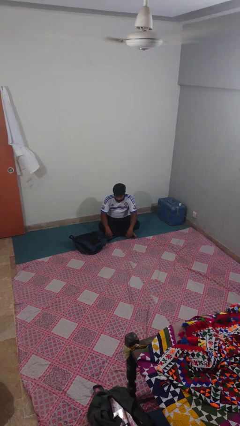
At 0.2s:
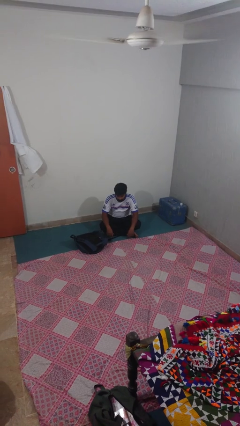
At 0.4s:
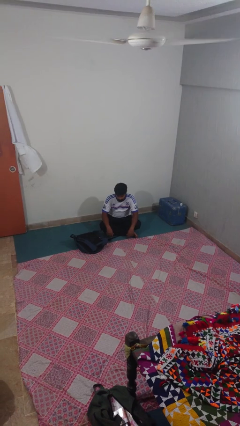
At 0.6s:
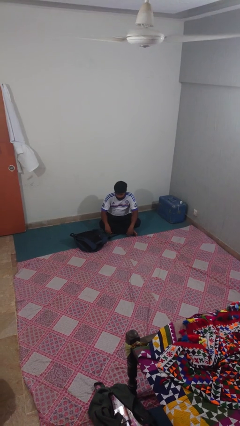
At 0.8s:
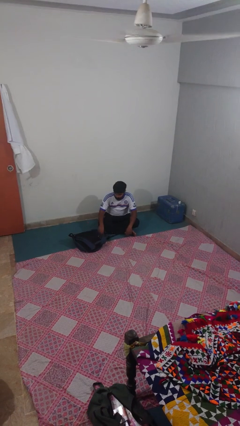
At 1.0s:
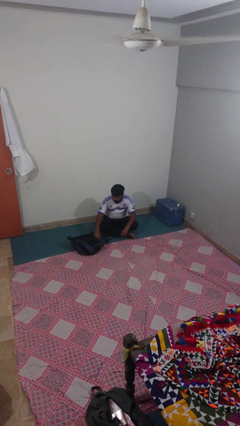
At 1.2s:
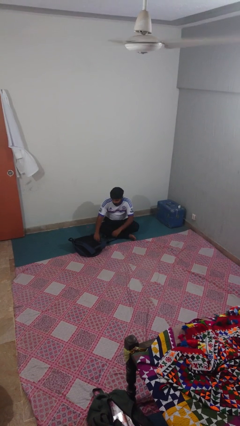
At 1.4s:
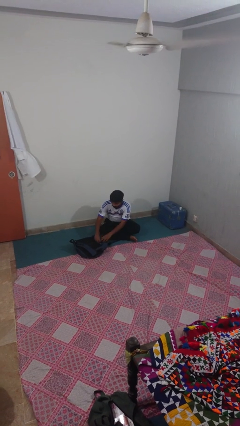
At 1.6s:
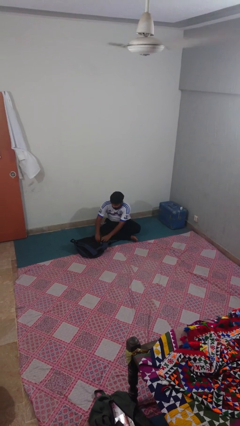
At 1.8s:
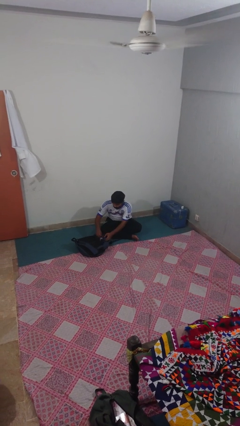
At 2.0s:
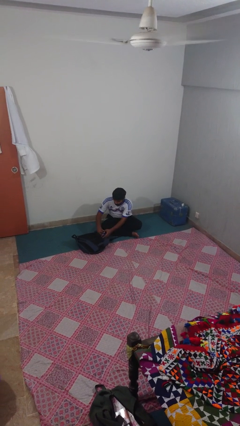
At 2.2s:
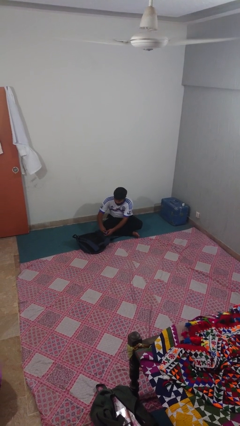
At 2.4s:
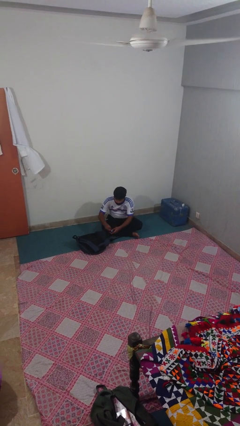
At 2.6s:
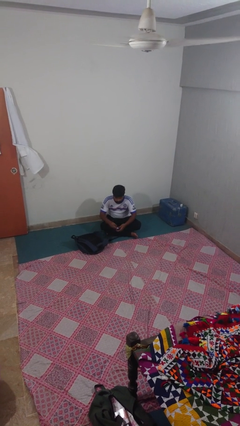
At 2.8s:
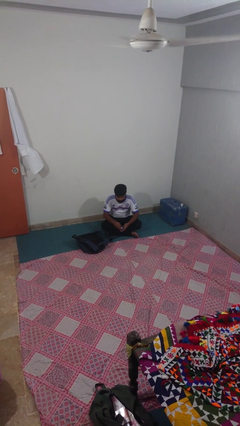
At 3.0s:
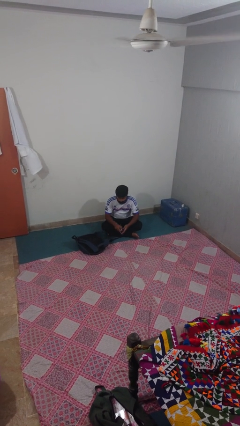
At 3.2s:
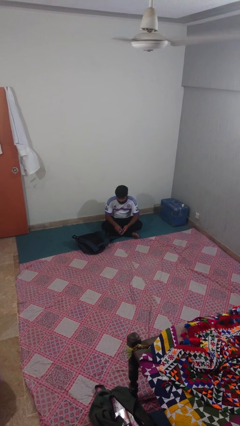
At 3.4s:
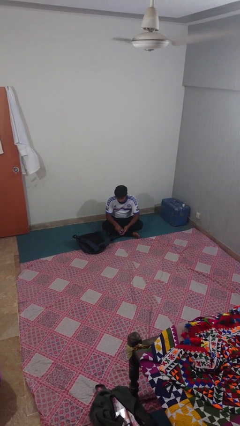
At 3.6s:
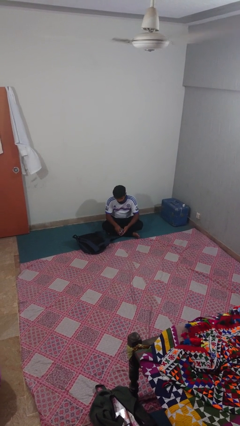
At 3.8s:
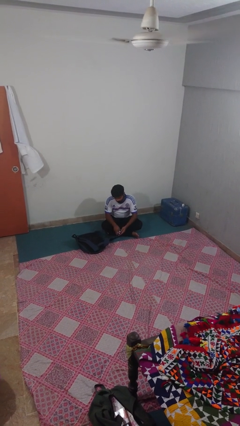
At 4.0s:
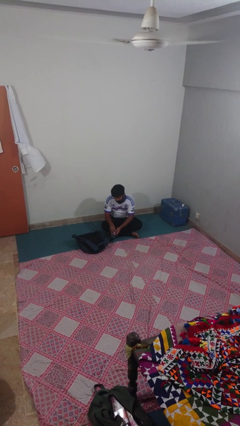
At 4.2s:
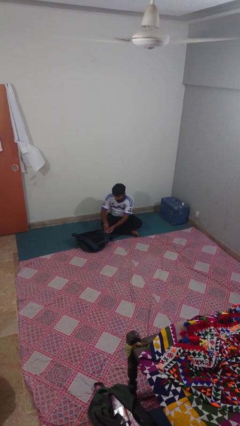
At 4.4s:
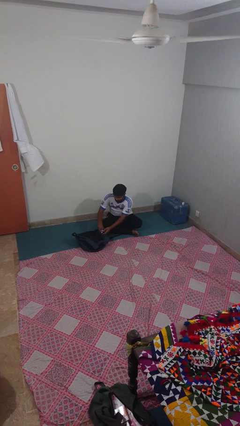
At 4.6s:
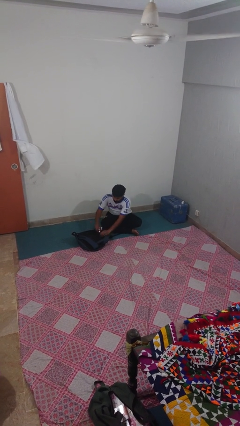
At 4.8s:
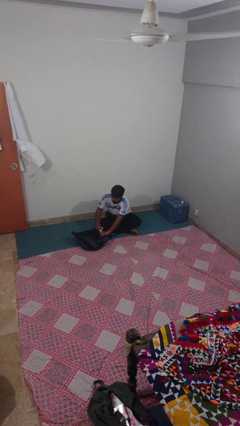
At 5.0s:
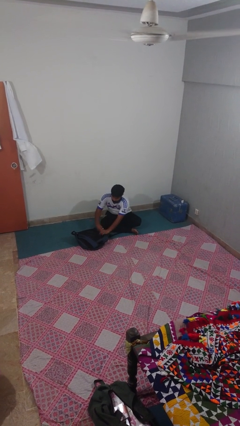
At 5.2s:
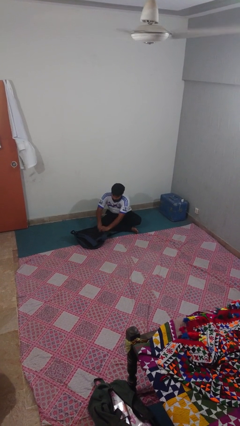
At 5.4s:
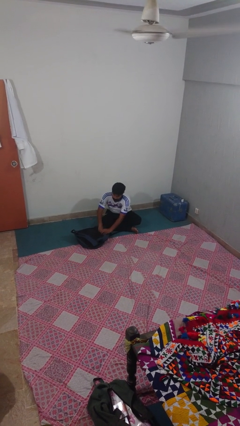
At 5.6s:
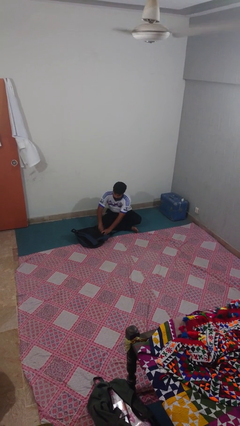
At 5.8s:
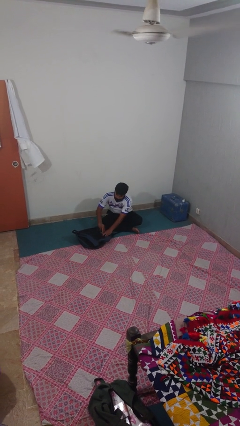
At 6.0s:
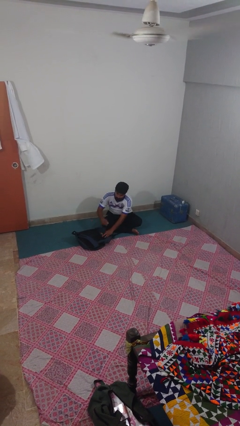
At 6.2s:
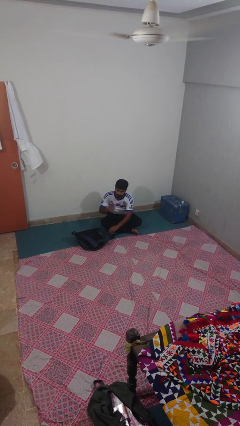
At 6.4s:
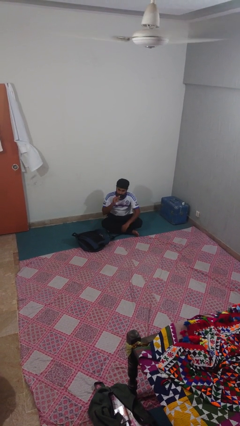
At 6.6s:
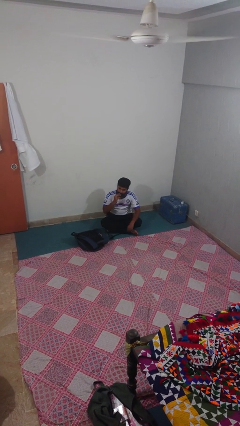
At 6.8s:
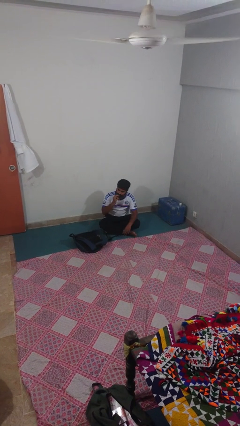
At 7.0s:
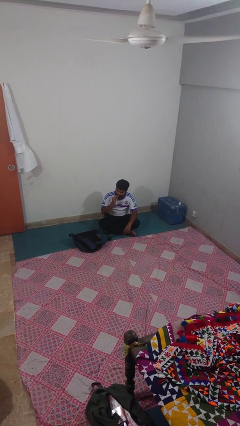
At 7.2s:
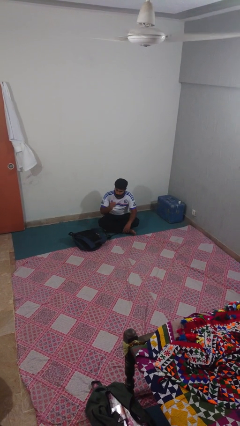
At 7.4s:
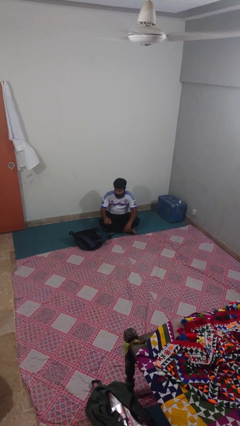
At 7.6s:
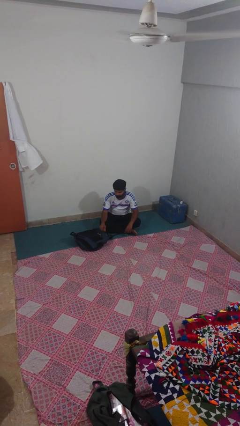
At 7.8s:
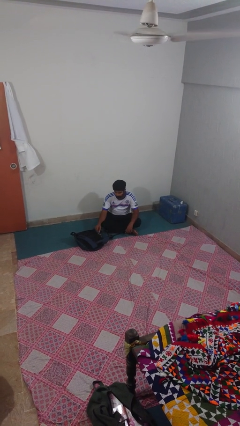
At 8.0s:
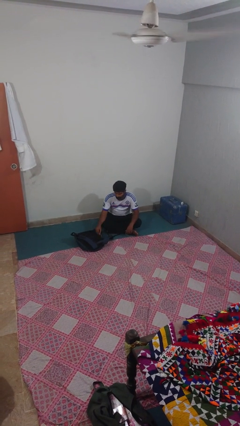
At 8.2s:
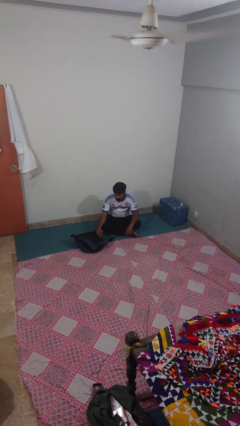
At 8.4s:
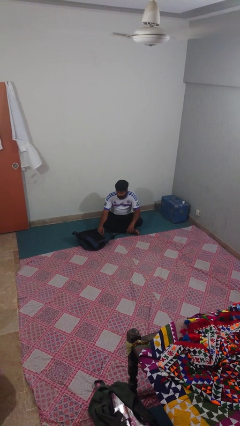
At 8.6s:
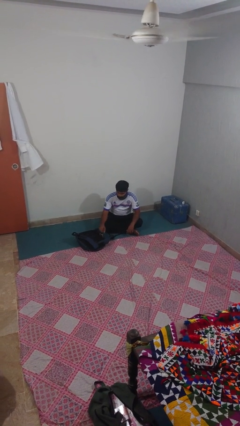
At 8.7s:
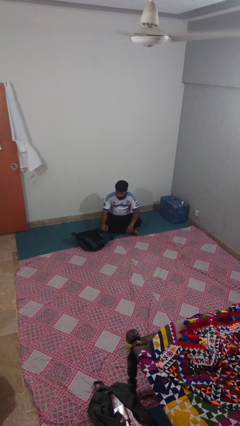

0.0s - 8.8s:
person eats snack from bag

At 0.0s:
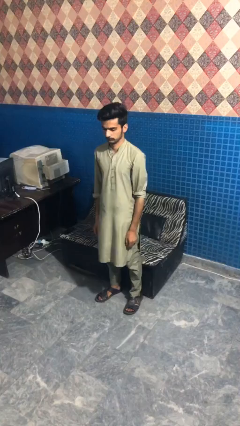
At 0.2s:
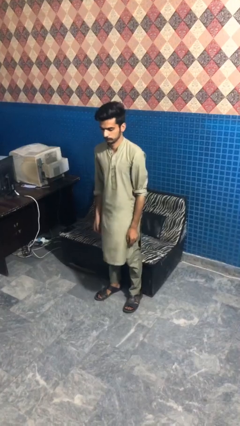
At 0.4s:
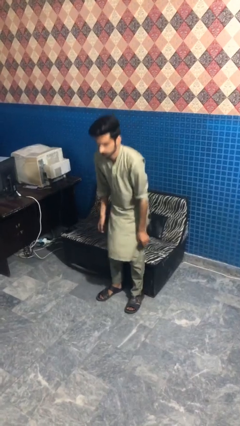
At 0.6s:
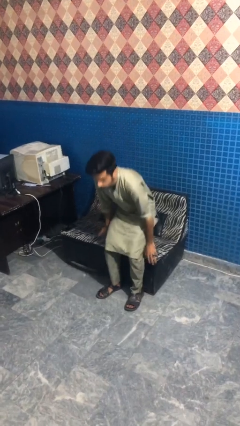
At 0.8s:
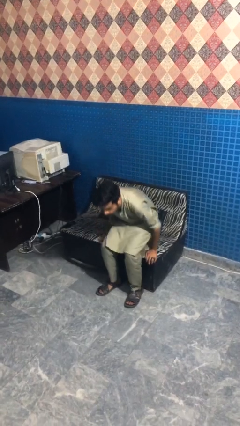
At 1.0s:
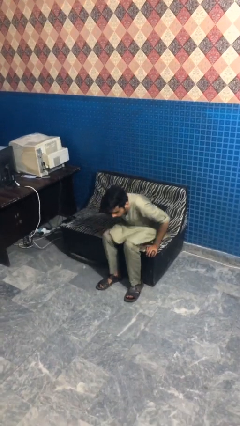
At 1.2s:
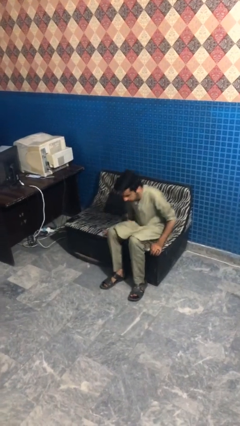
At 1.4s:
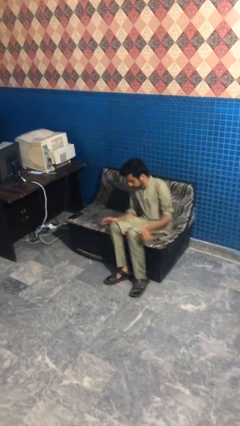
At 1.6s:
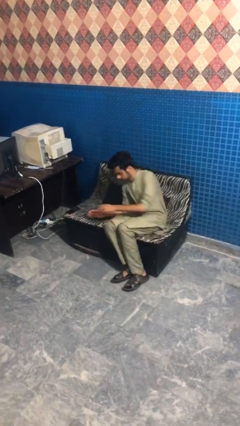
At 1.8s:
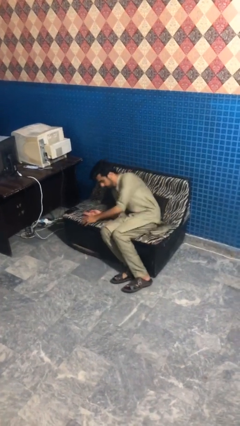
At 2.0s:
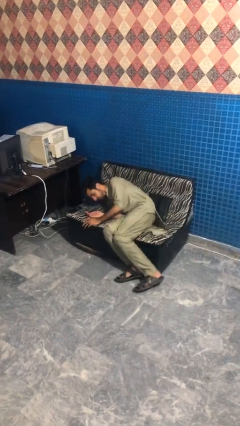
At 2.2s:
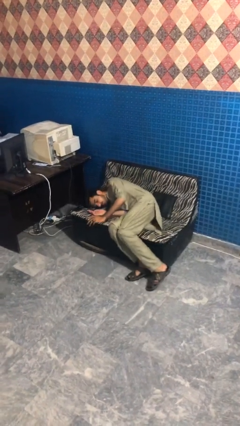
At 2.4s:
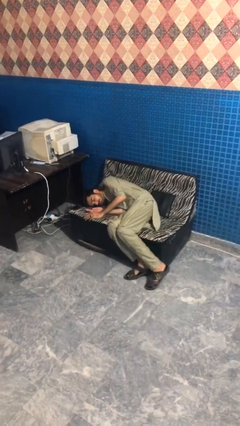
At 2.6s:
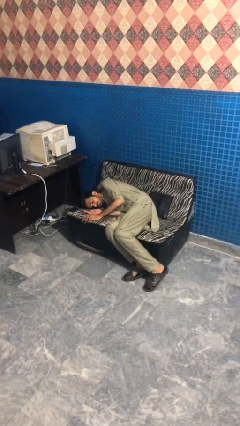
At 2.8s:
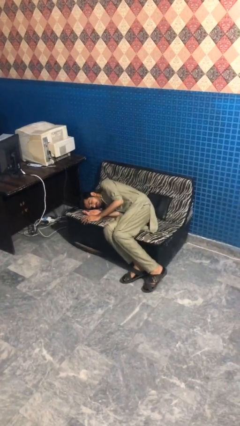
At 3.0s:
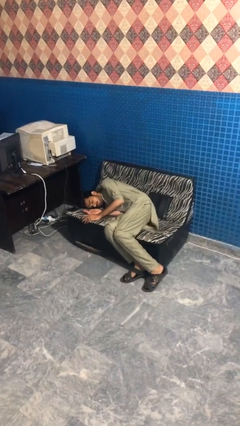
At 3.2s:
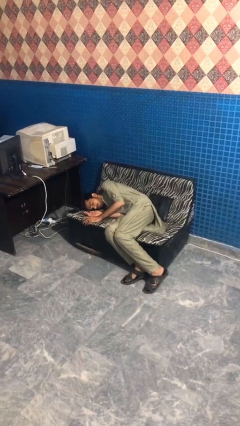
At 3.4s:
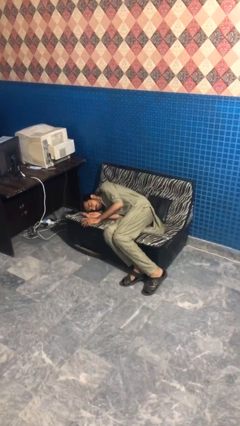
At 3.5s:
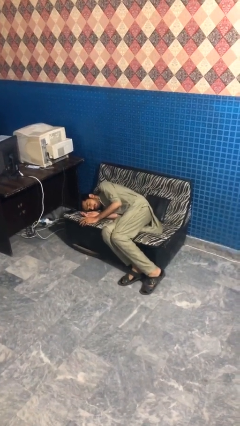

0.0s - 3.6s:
person lies down on couch

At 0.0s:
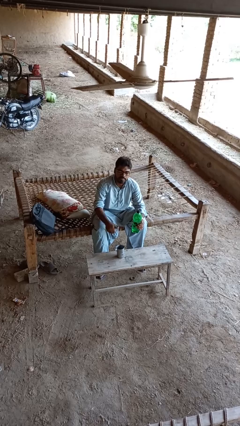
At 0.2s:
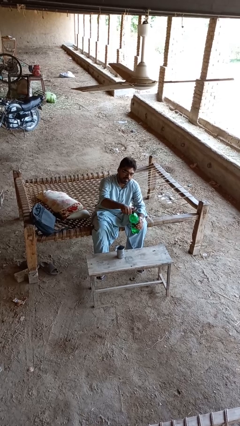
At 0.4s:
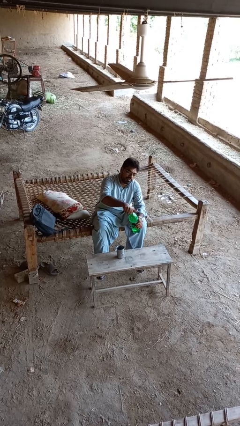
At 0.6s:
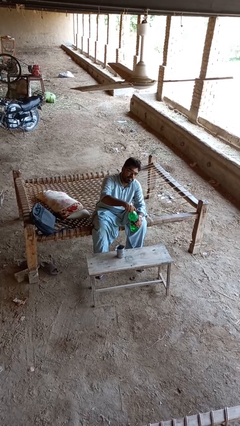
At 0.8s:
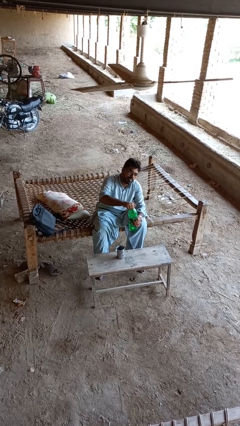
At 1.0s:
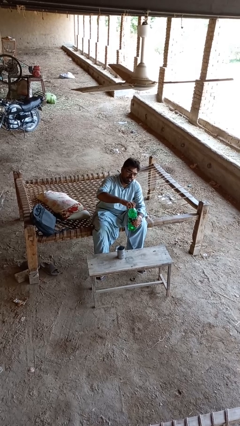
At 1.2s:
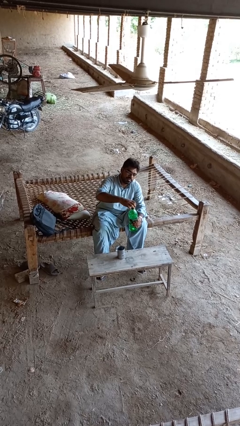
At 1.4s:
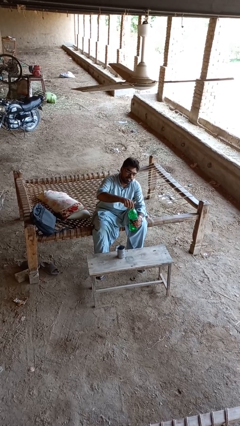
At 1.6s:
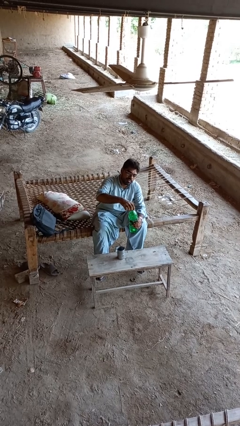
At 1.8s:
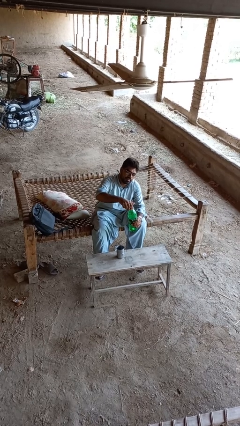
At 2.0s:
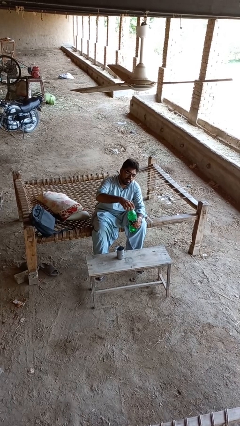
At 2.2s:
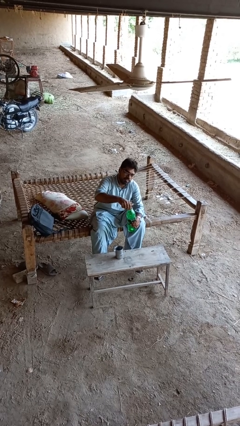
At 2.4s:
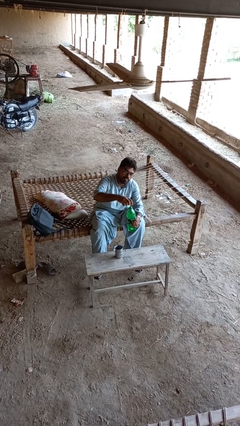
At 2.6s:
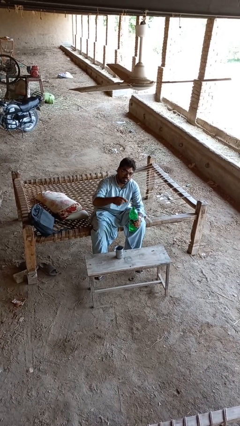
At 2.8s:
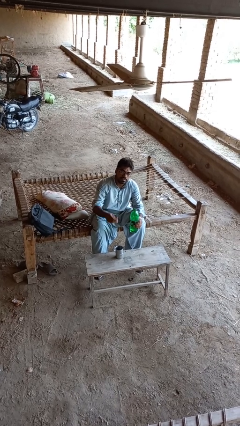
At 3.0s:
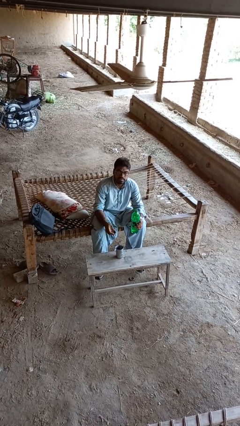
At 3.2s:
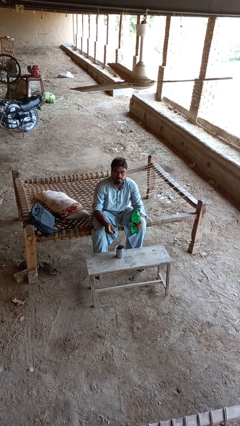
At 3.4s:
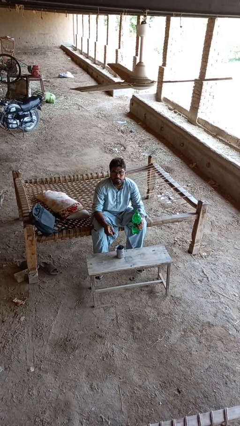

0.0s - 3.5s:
person unscrews lid from bottle

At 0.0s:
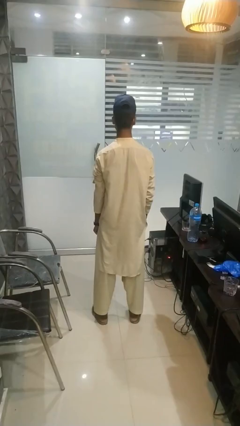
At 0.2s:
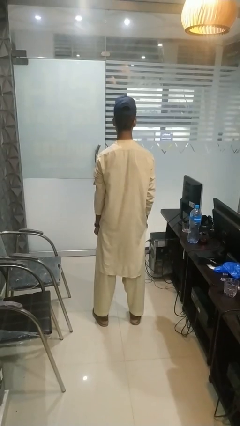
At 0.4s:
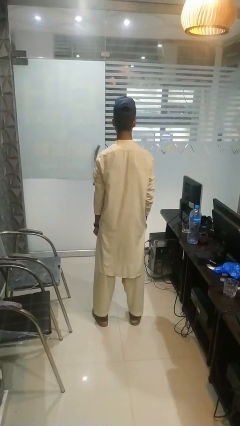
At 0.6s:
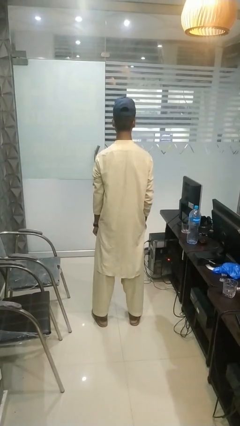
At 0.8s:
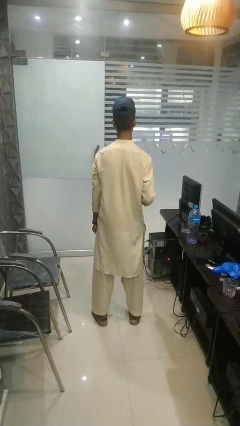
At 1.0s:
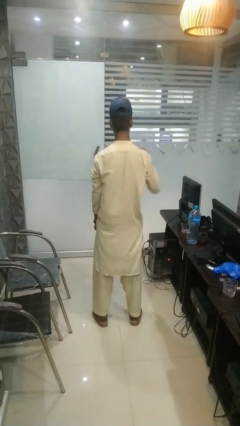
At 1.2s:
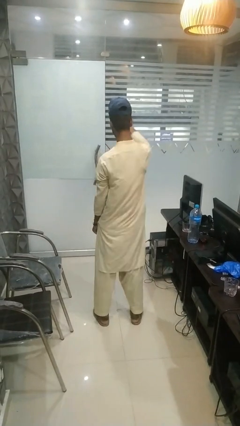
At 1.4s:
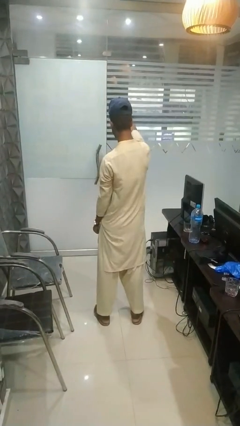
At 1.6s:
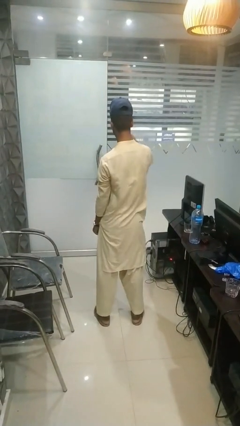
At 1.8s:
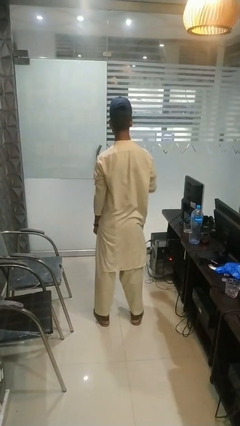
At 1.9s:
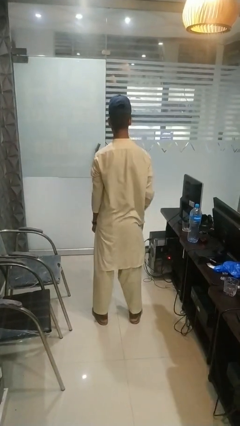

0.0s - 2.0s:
person karate chop

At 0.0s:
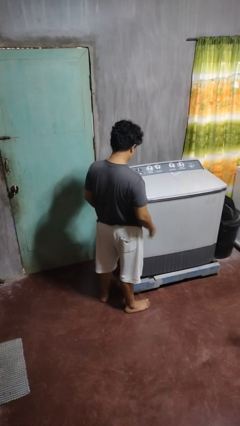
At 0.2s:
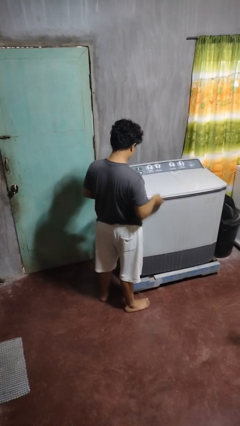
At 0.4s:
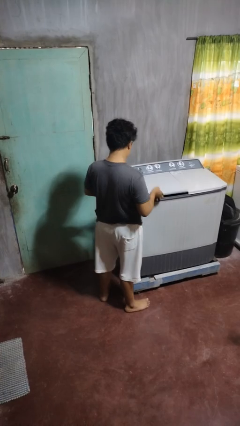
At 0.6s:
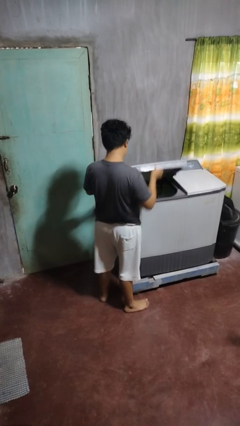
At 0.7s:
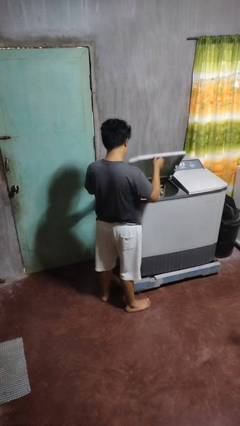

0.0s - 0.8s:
person opens clothes washer
